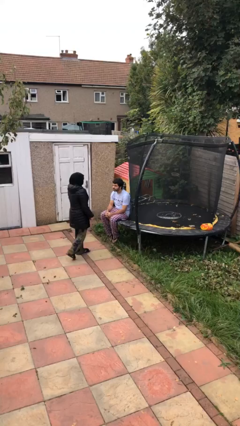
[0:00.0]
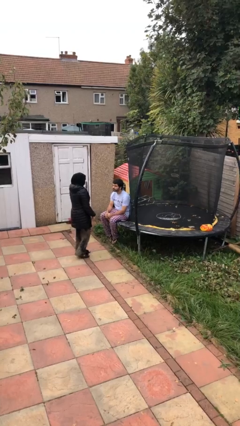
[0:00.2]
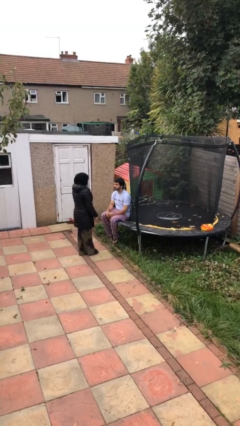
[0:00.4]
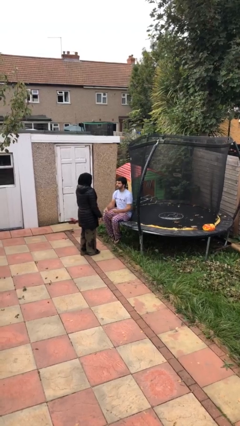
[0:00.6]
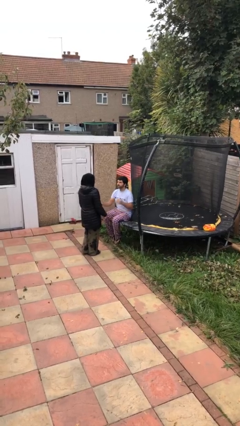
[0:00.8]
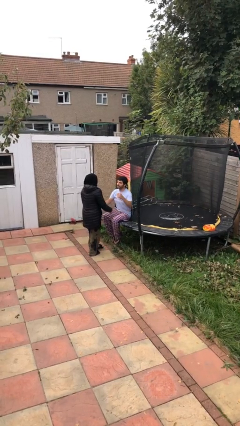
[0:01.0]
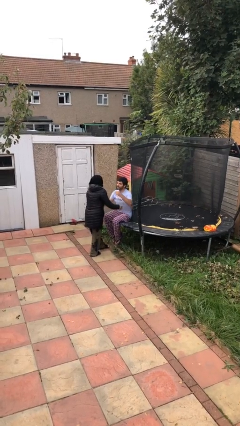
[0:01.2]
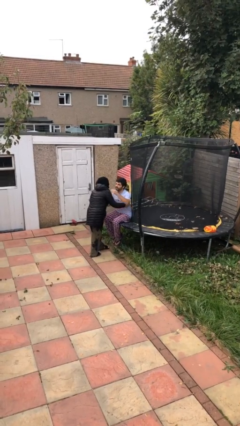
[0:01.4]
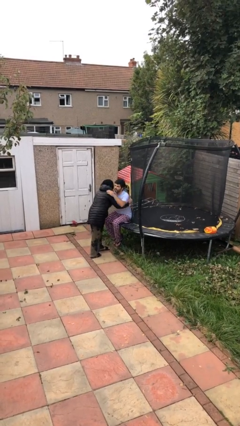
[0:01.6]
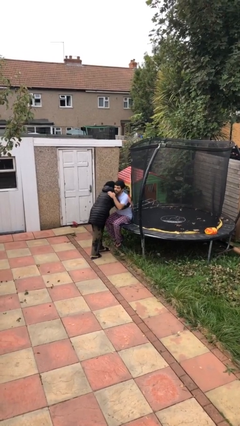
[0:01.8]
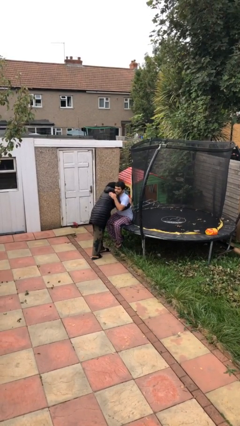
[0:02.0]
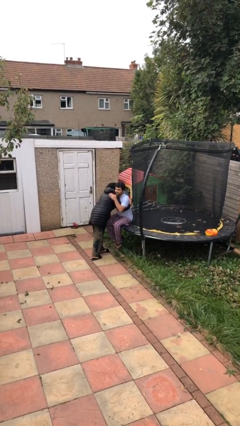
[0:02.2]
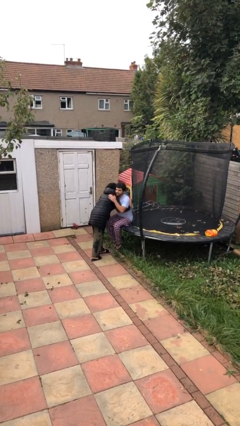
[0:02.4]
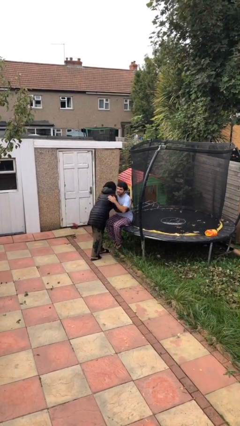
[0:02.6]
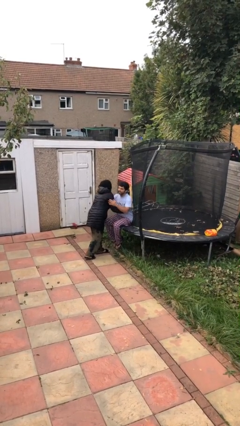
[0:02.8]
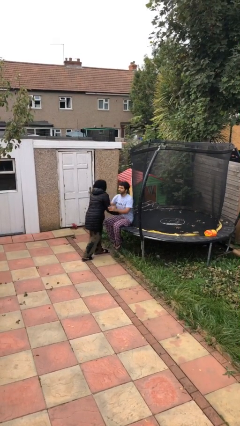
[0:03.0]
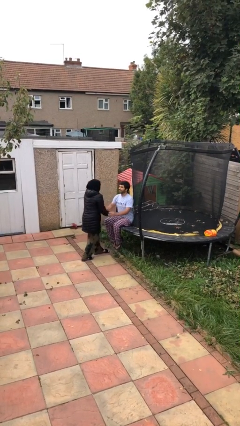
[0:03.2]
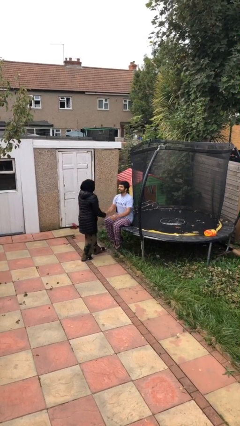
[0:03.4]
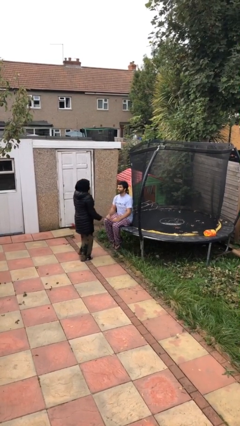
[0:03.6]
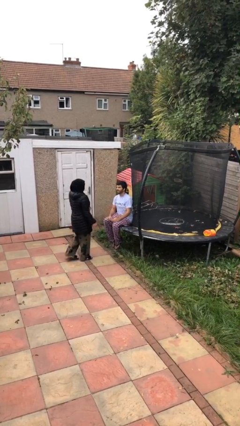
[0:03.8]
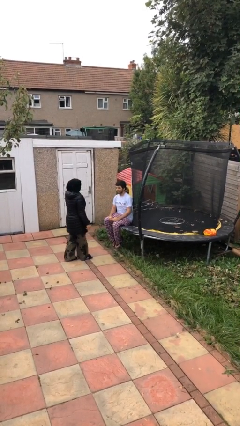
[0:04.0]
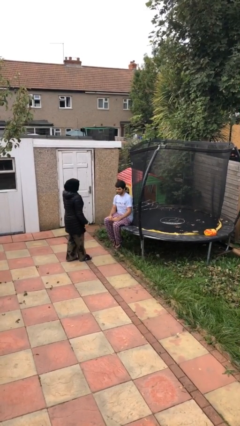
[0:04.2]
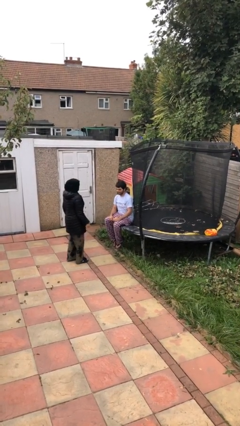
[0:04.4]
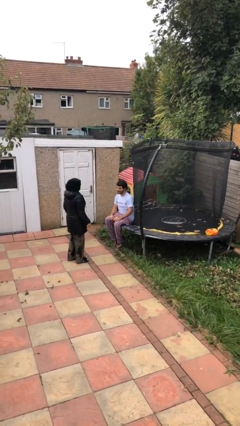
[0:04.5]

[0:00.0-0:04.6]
person embraces person

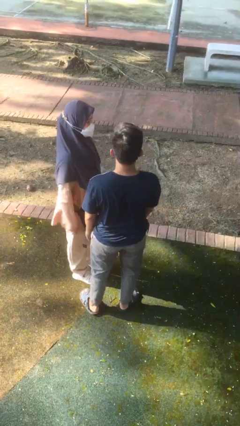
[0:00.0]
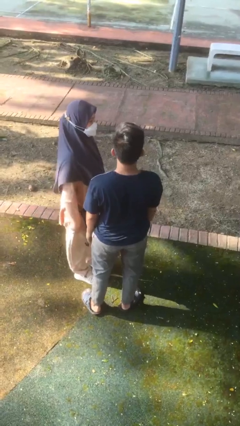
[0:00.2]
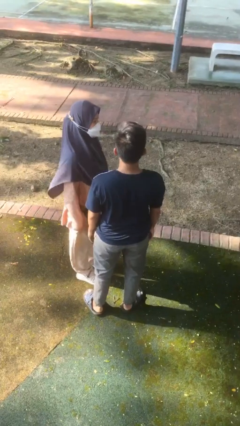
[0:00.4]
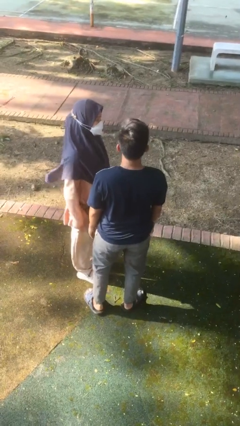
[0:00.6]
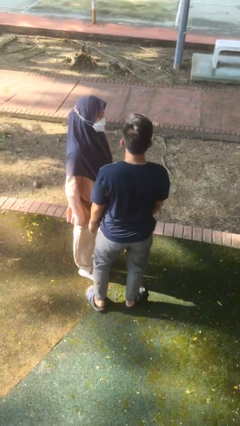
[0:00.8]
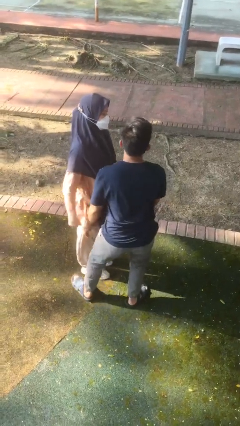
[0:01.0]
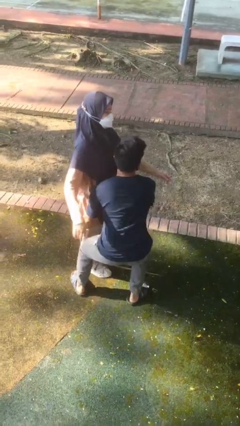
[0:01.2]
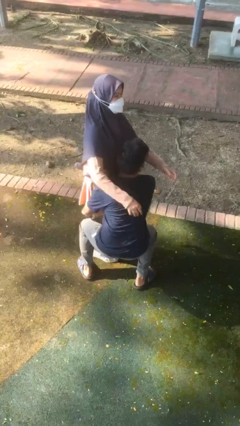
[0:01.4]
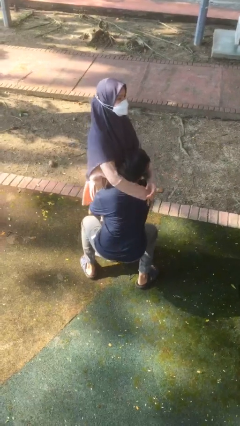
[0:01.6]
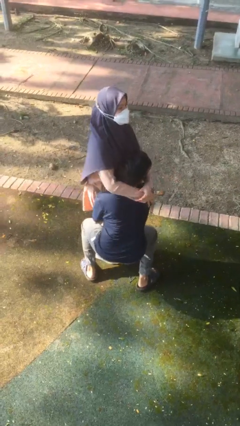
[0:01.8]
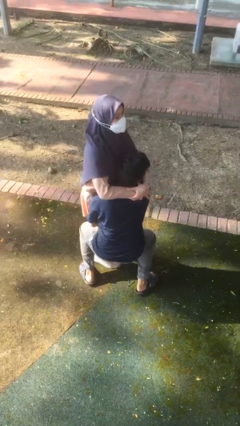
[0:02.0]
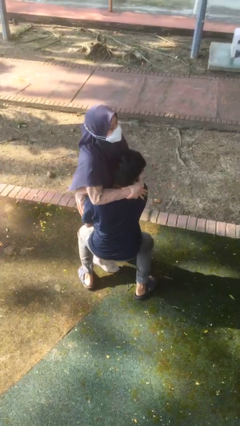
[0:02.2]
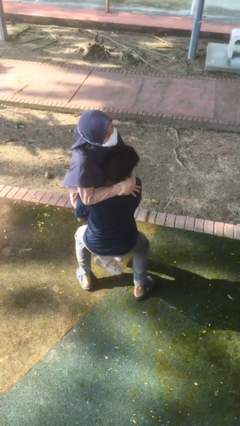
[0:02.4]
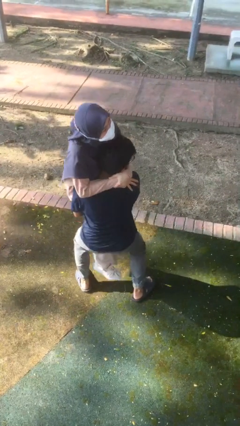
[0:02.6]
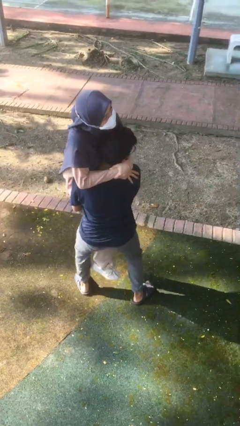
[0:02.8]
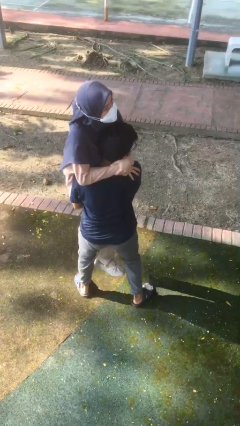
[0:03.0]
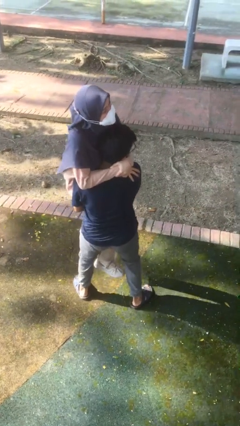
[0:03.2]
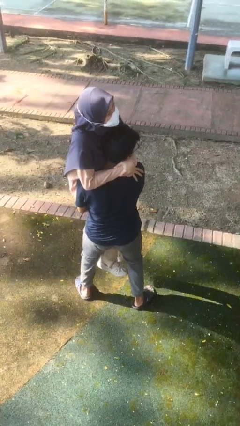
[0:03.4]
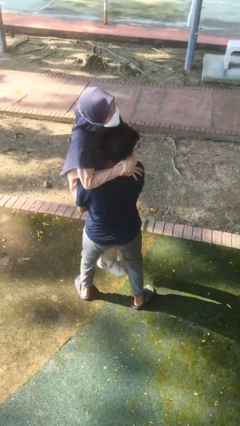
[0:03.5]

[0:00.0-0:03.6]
person picks up person

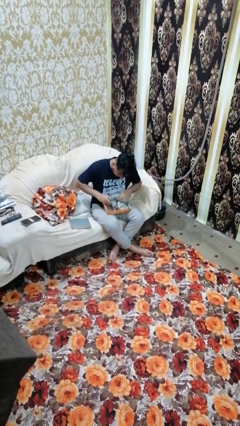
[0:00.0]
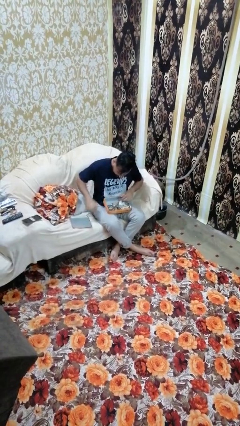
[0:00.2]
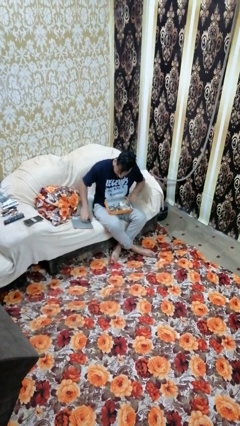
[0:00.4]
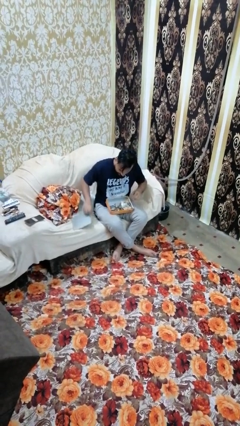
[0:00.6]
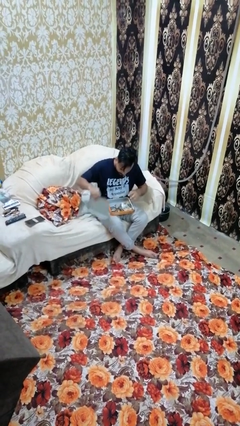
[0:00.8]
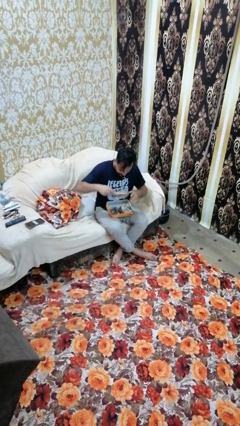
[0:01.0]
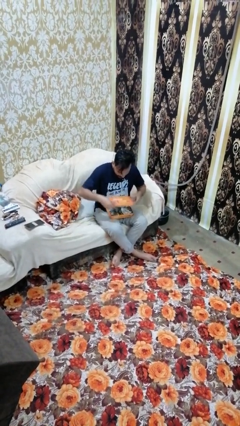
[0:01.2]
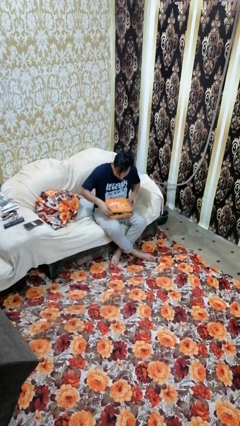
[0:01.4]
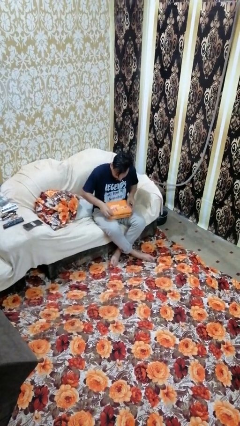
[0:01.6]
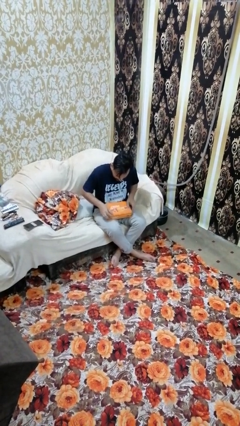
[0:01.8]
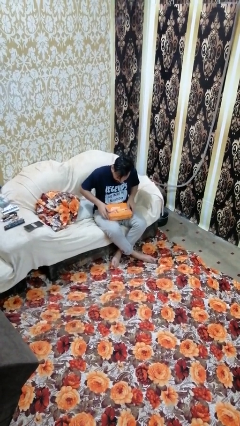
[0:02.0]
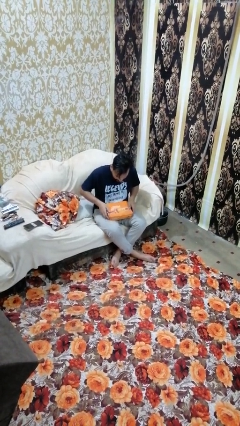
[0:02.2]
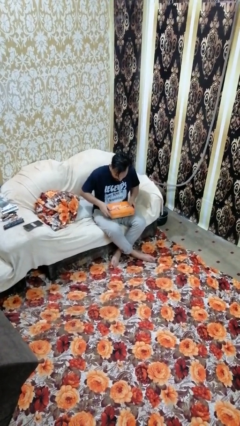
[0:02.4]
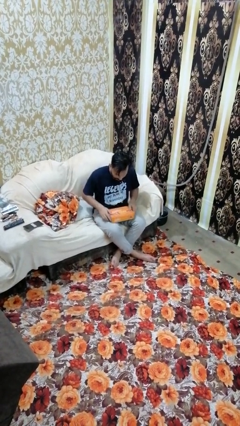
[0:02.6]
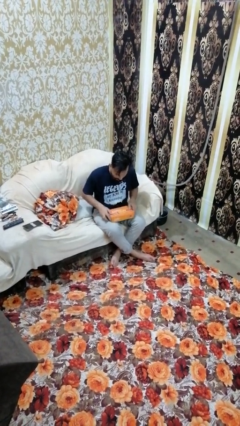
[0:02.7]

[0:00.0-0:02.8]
person closes jewelry box

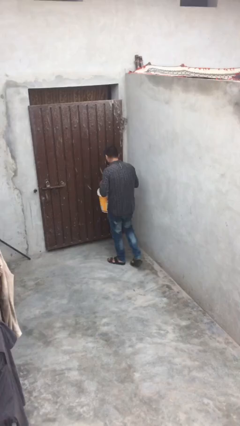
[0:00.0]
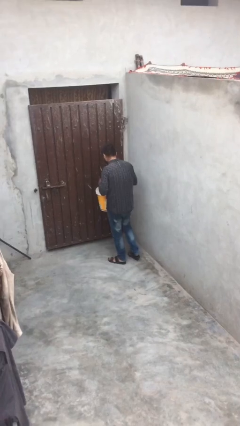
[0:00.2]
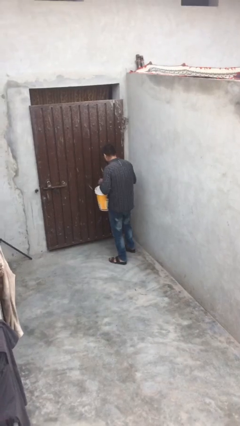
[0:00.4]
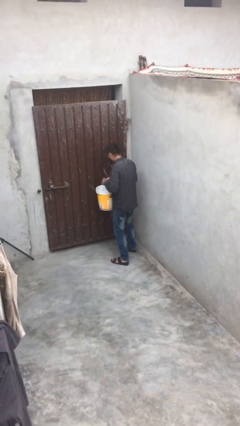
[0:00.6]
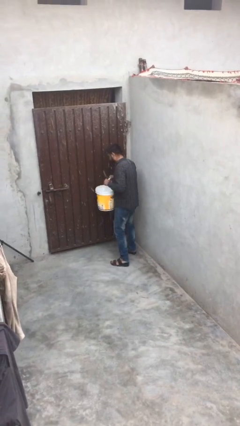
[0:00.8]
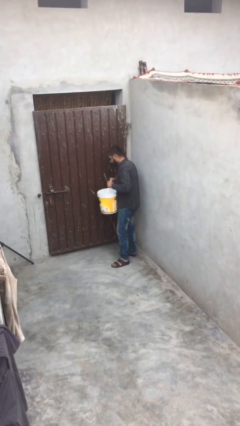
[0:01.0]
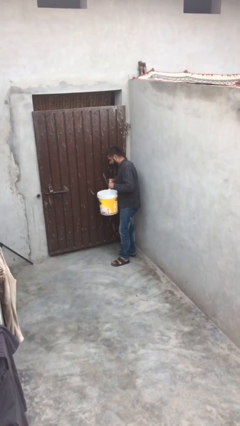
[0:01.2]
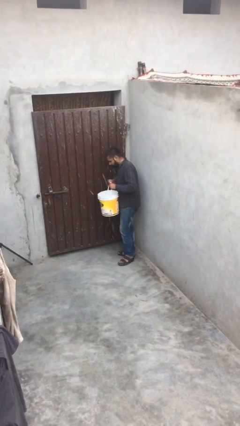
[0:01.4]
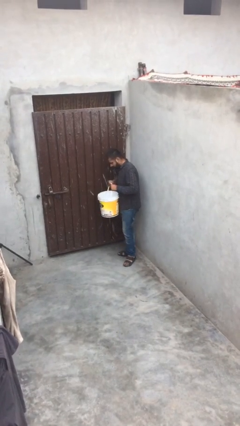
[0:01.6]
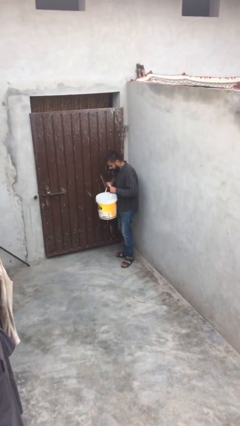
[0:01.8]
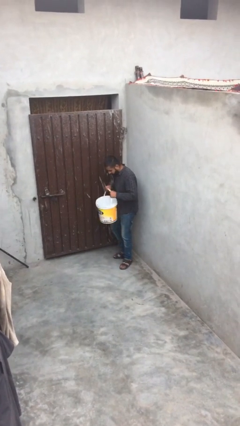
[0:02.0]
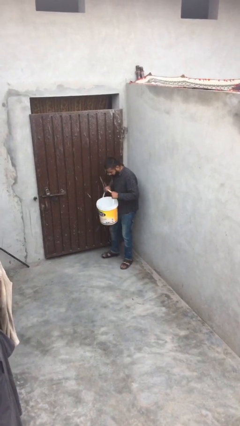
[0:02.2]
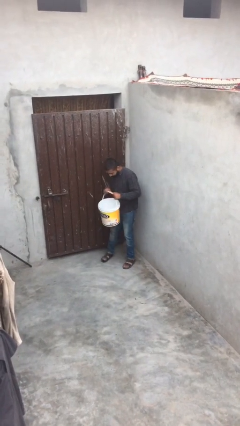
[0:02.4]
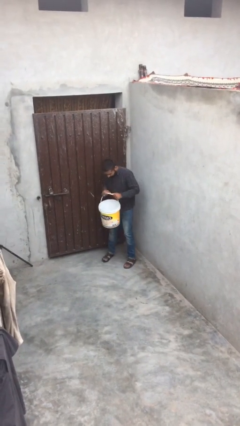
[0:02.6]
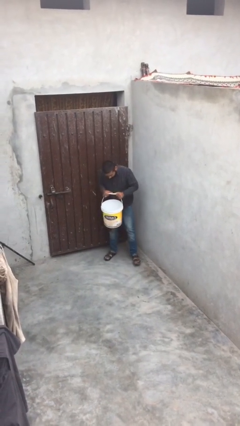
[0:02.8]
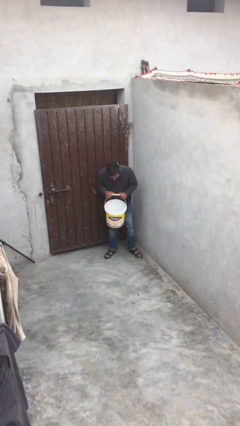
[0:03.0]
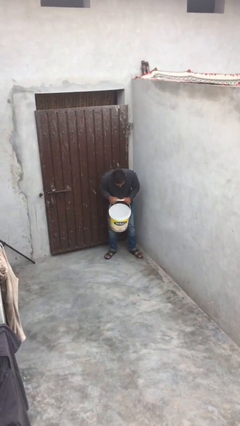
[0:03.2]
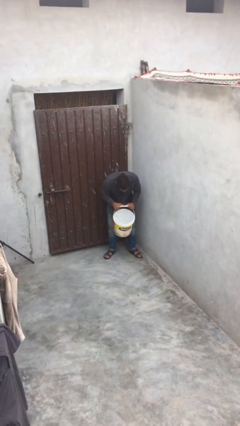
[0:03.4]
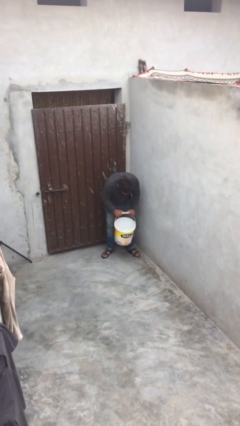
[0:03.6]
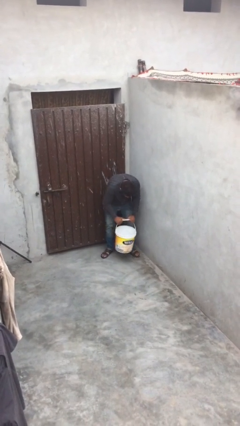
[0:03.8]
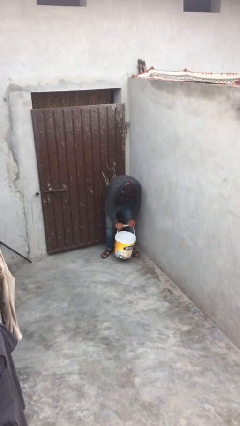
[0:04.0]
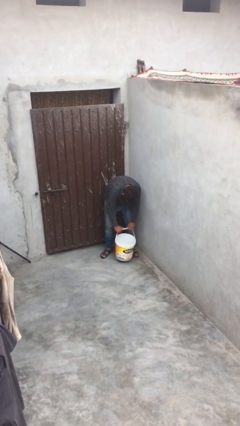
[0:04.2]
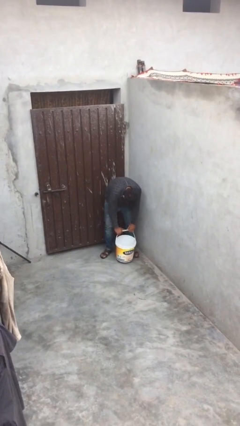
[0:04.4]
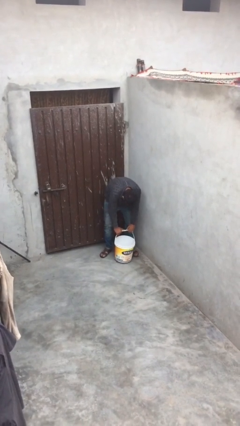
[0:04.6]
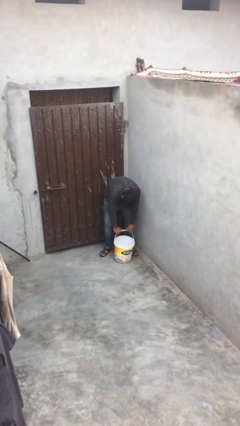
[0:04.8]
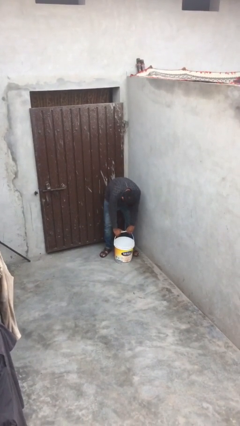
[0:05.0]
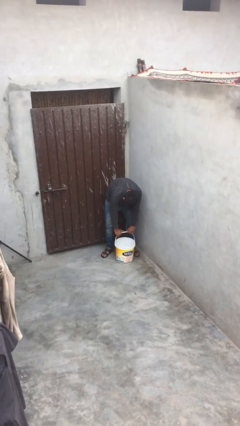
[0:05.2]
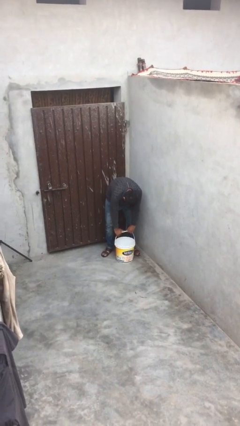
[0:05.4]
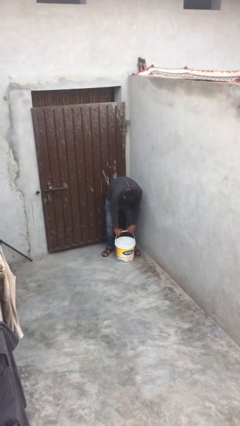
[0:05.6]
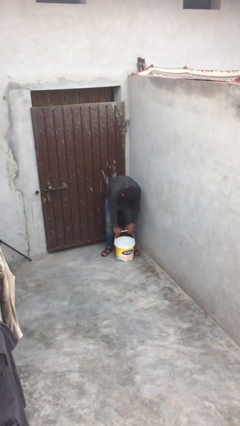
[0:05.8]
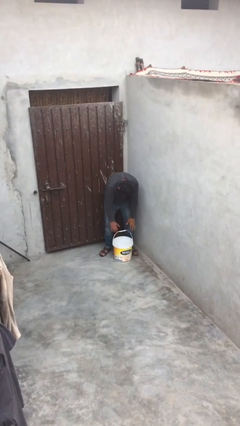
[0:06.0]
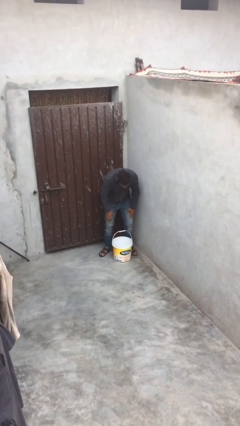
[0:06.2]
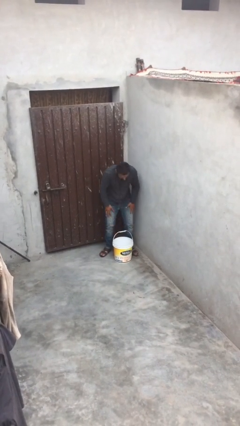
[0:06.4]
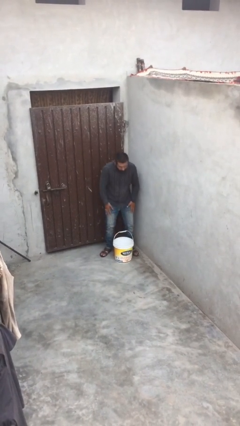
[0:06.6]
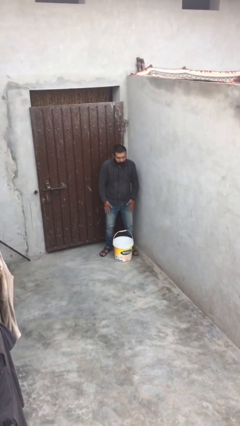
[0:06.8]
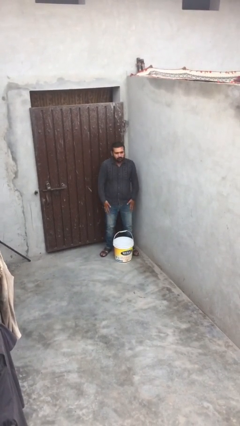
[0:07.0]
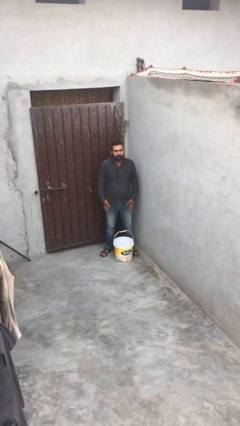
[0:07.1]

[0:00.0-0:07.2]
person puts down object on floor
